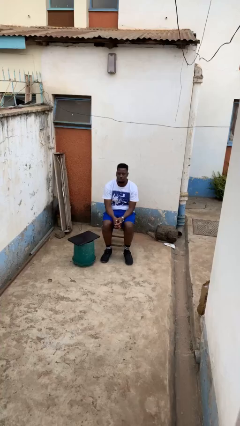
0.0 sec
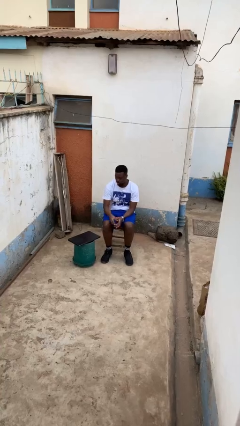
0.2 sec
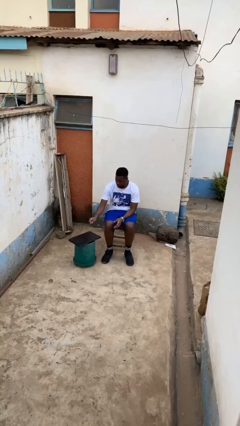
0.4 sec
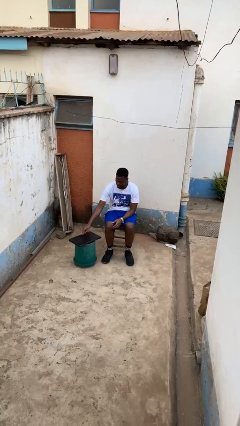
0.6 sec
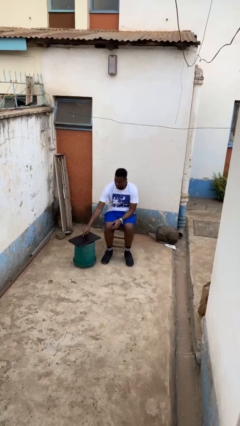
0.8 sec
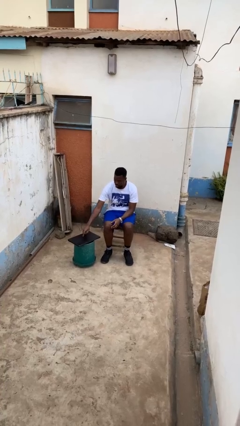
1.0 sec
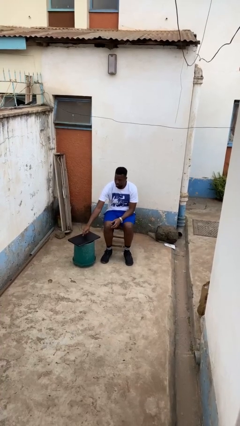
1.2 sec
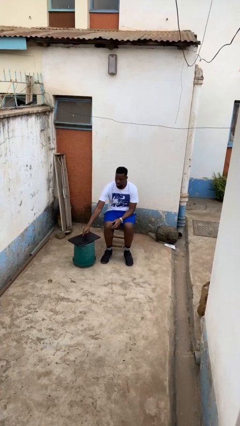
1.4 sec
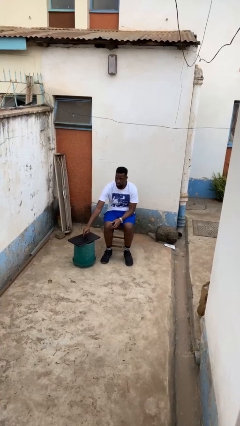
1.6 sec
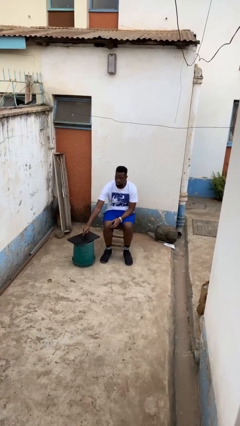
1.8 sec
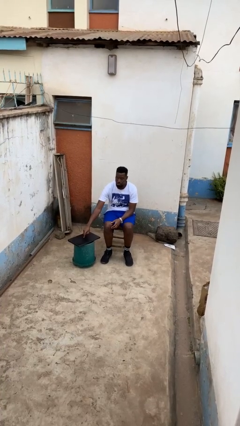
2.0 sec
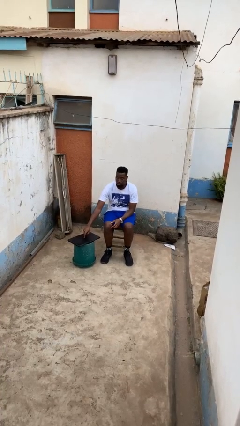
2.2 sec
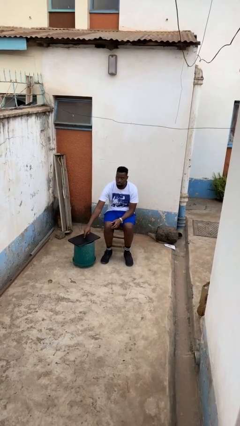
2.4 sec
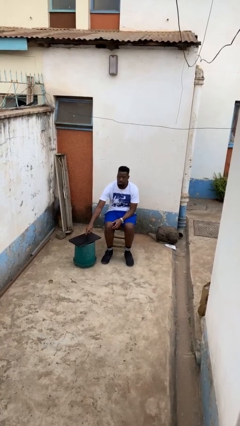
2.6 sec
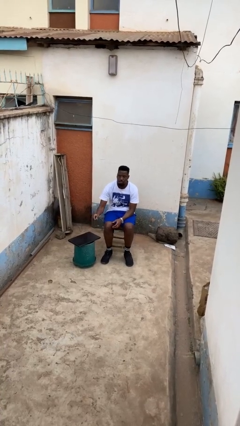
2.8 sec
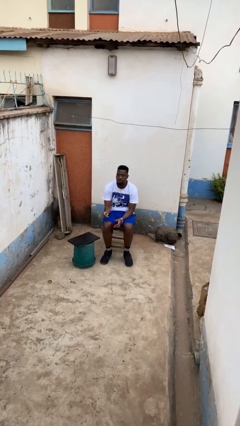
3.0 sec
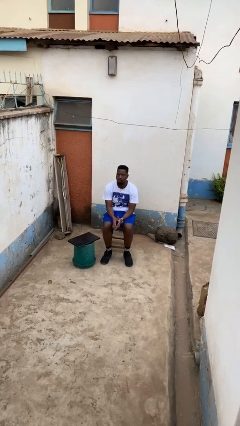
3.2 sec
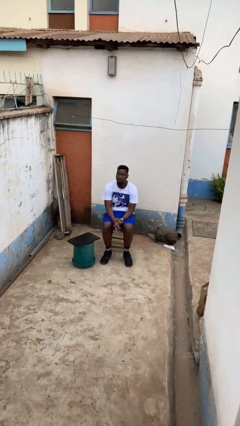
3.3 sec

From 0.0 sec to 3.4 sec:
person taps object with finger

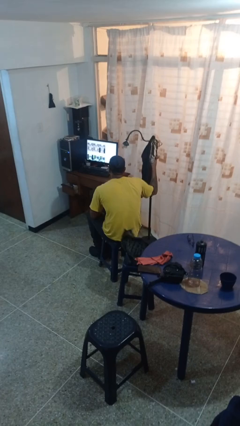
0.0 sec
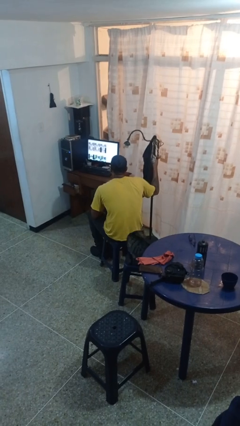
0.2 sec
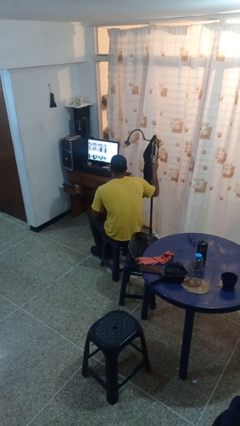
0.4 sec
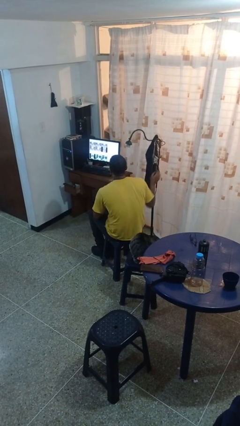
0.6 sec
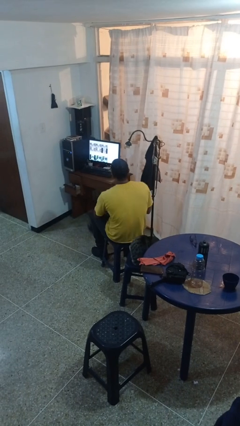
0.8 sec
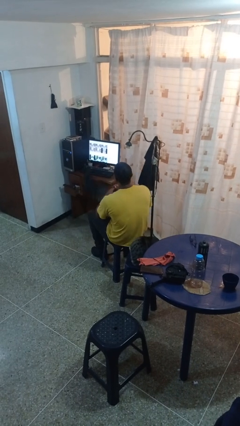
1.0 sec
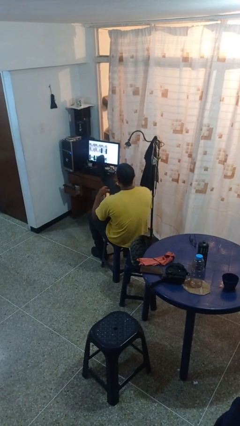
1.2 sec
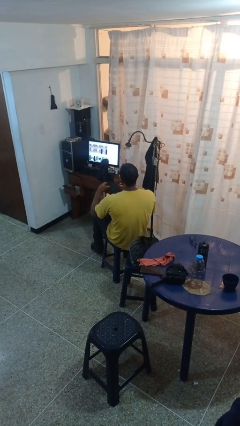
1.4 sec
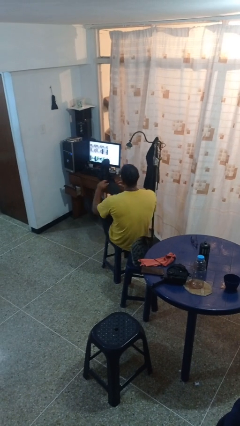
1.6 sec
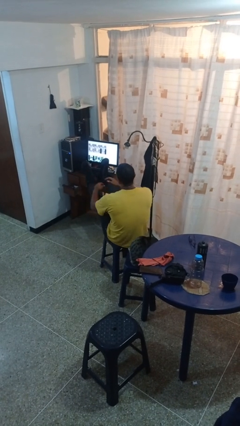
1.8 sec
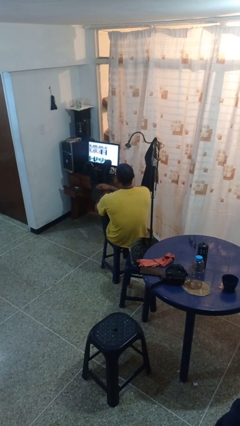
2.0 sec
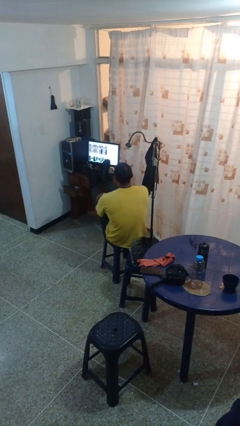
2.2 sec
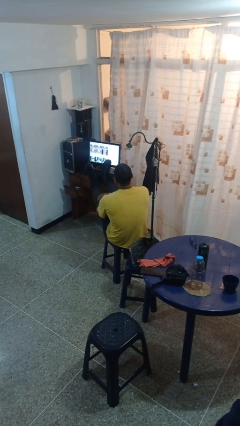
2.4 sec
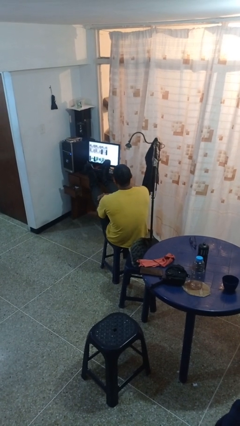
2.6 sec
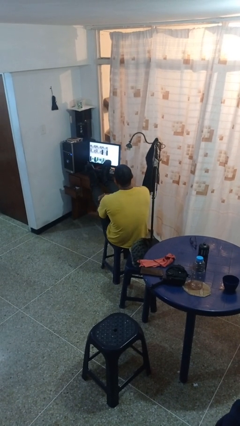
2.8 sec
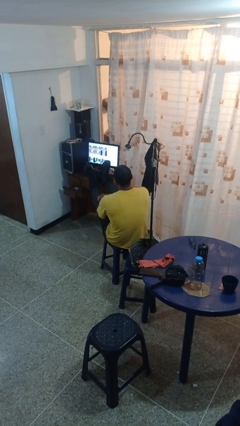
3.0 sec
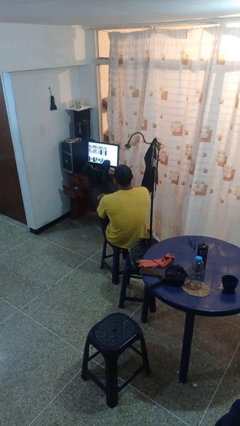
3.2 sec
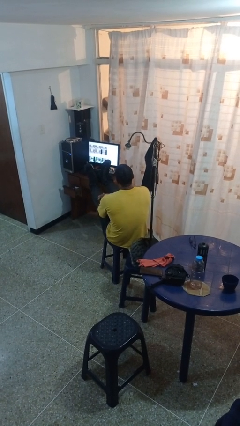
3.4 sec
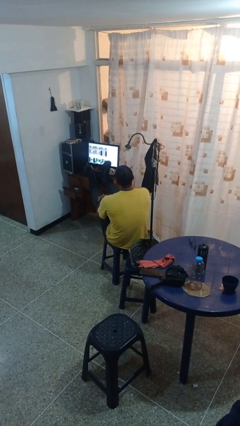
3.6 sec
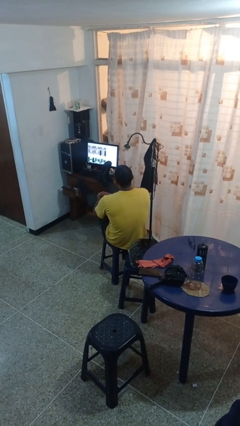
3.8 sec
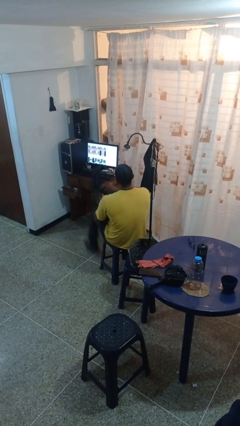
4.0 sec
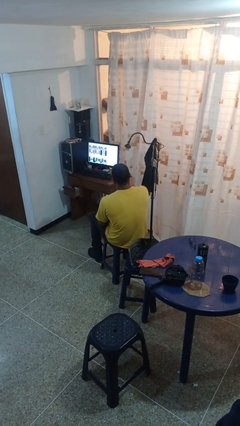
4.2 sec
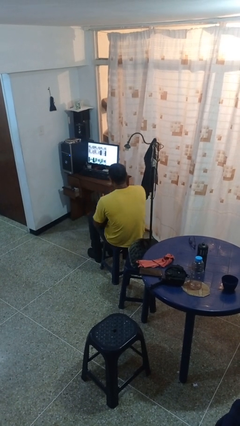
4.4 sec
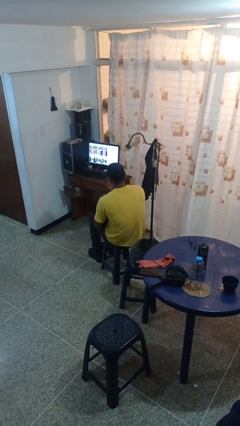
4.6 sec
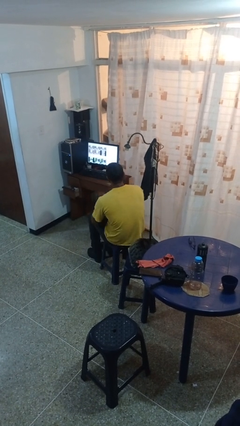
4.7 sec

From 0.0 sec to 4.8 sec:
person puts feet up

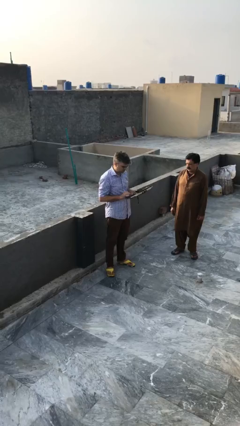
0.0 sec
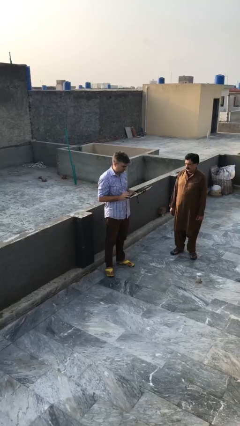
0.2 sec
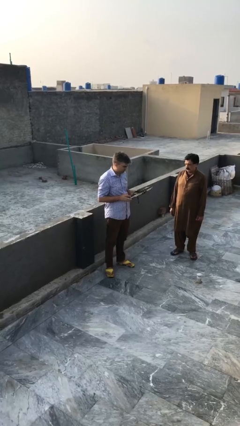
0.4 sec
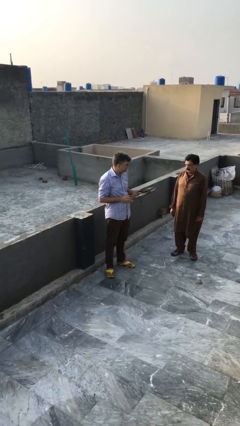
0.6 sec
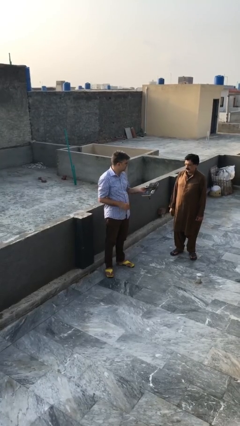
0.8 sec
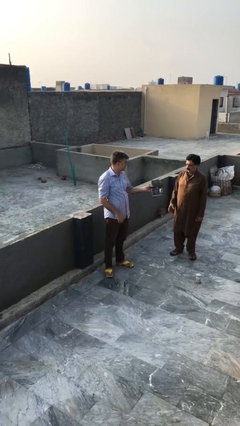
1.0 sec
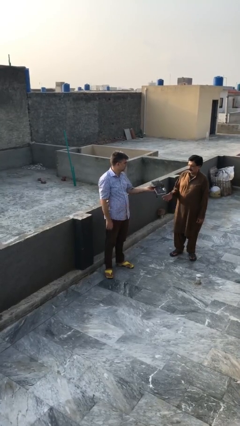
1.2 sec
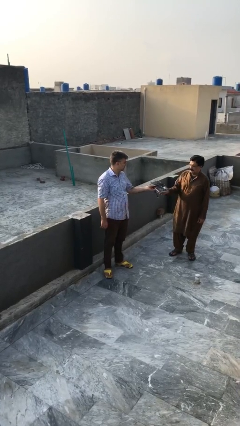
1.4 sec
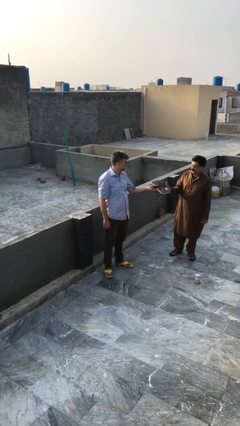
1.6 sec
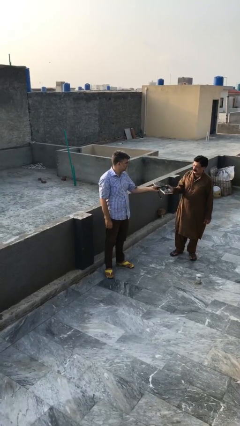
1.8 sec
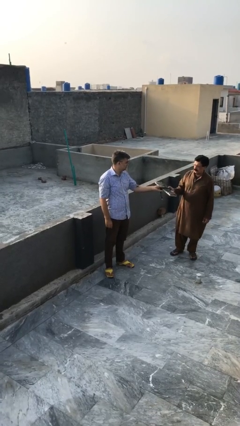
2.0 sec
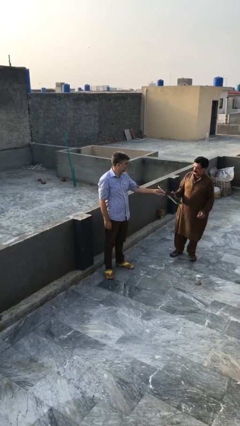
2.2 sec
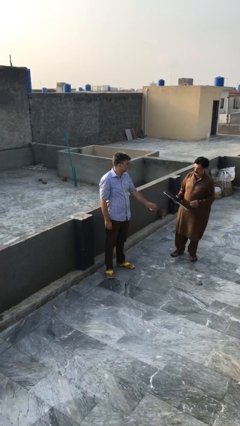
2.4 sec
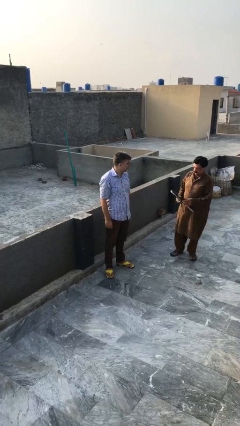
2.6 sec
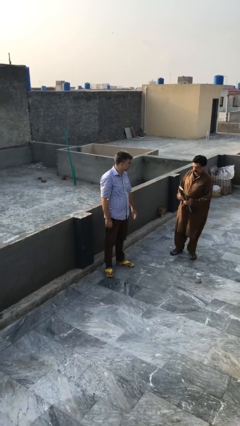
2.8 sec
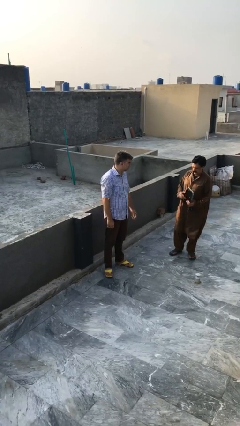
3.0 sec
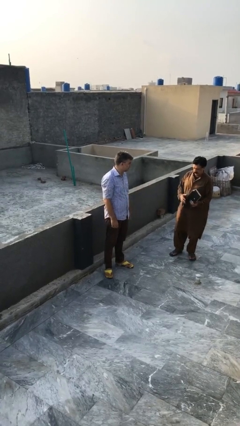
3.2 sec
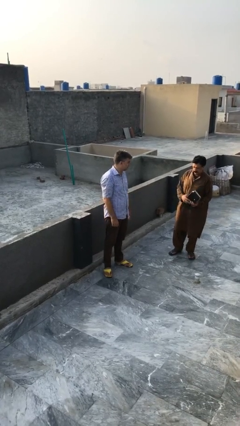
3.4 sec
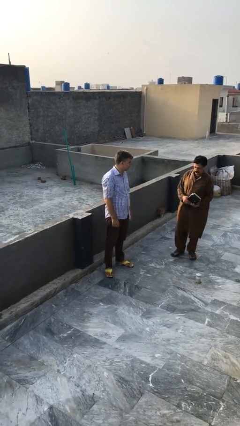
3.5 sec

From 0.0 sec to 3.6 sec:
person transfers object to person

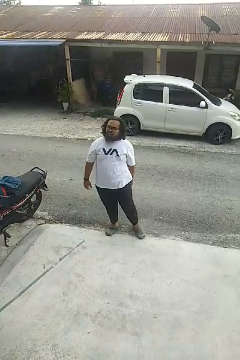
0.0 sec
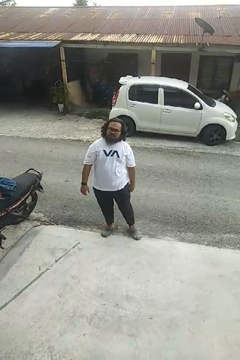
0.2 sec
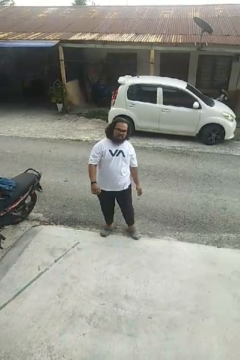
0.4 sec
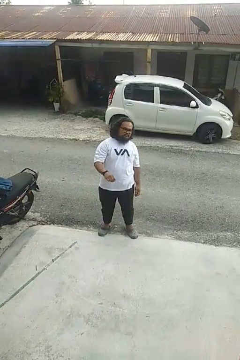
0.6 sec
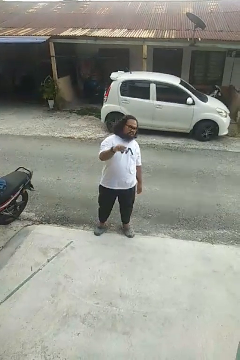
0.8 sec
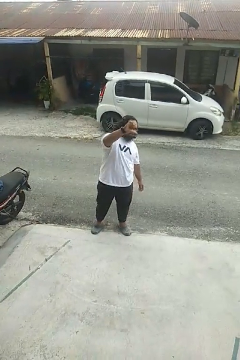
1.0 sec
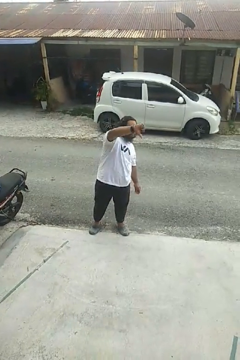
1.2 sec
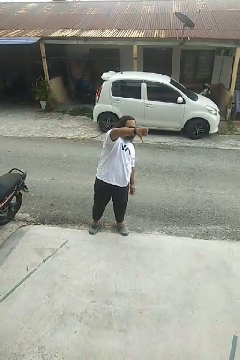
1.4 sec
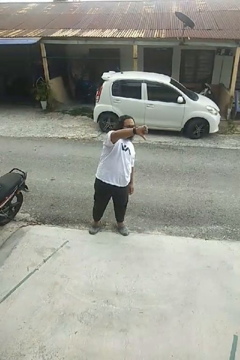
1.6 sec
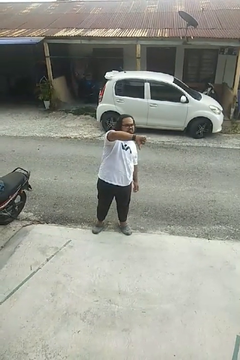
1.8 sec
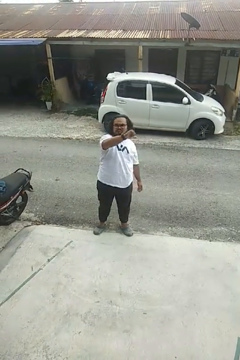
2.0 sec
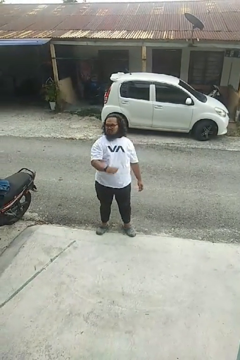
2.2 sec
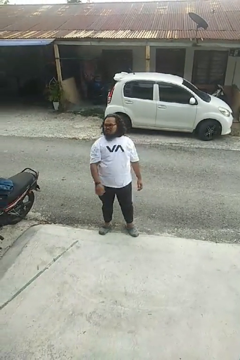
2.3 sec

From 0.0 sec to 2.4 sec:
person gestures thumbs down

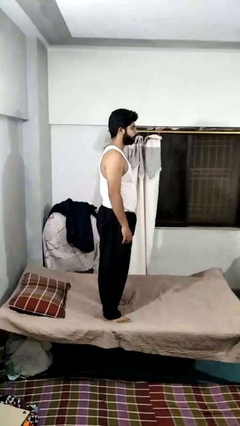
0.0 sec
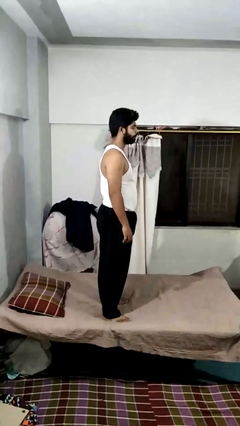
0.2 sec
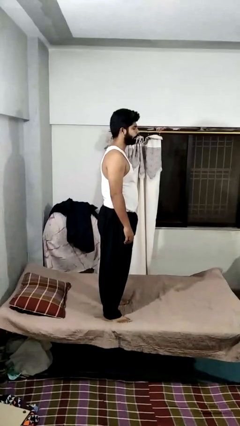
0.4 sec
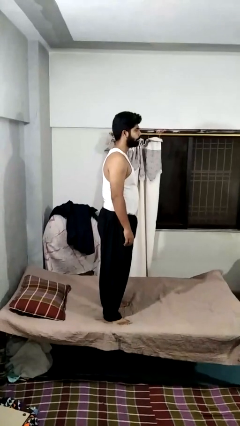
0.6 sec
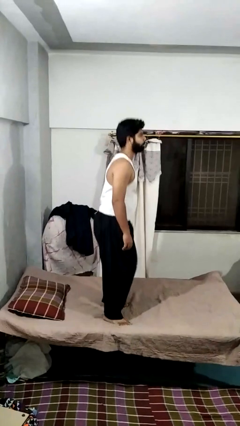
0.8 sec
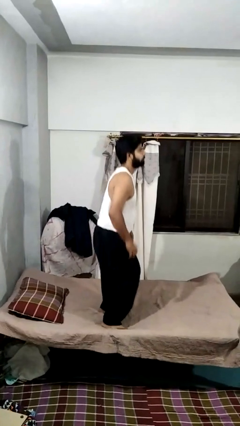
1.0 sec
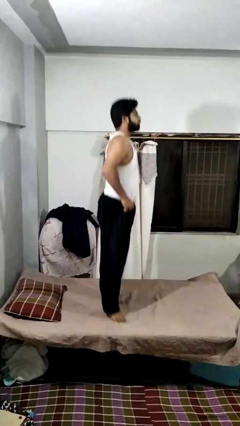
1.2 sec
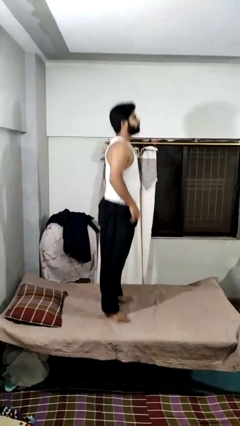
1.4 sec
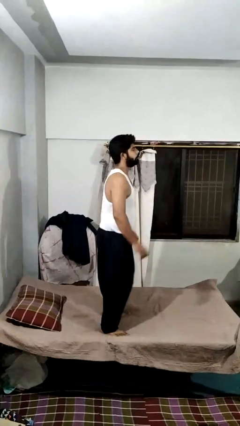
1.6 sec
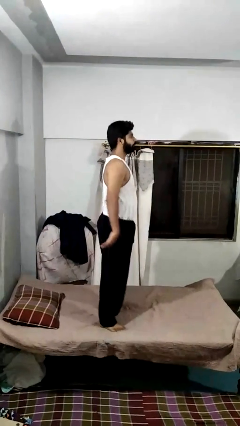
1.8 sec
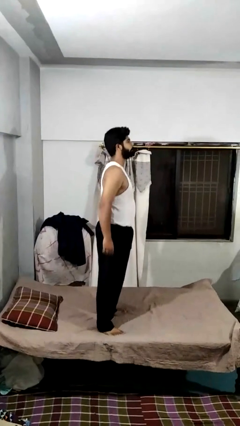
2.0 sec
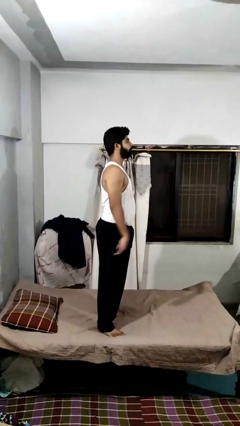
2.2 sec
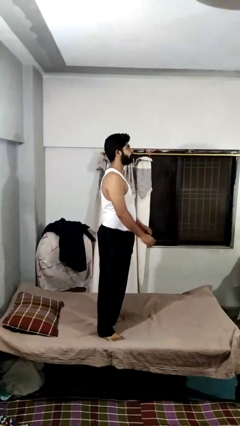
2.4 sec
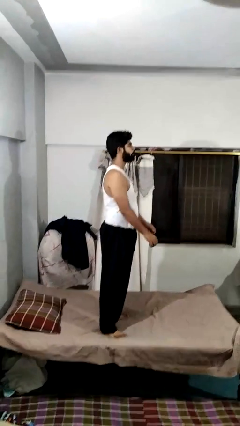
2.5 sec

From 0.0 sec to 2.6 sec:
person jumps on bed

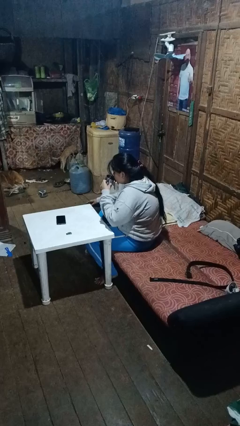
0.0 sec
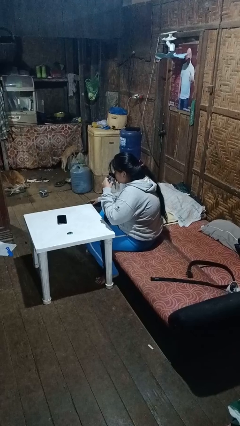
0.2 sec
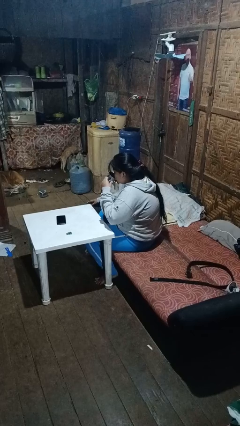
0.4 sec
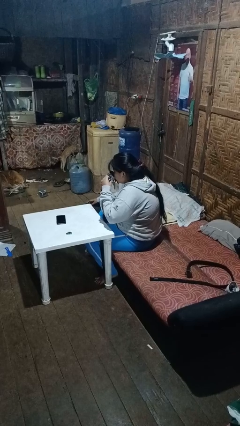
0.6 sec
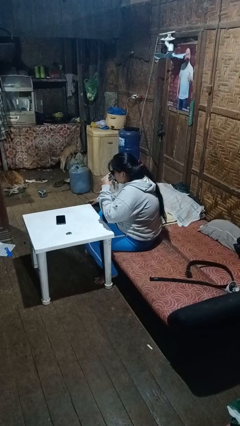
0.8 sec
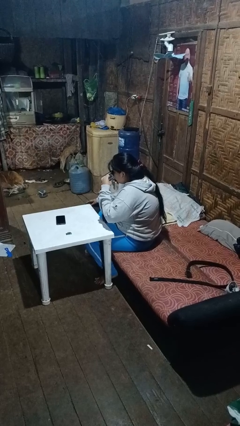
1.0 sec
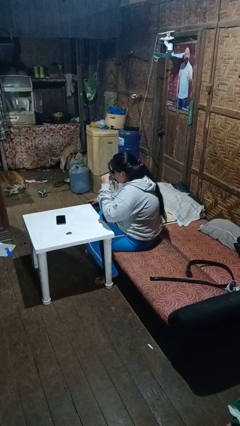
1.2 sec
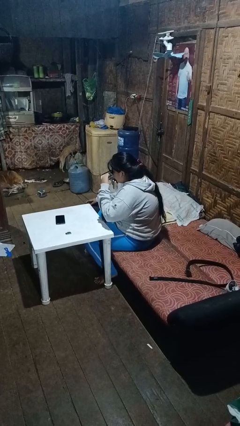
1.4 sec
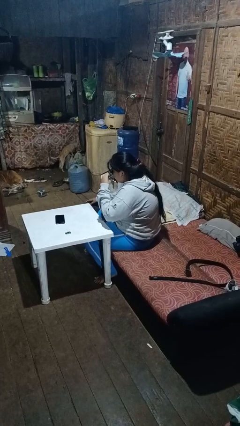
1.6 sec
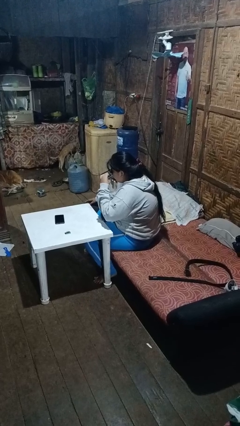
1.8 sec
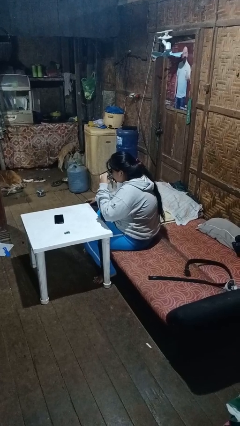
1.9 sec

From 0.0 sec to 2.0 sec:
person drinks from mug
